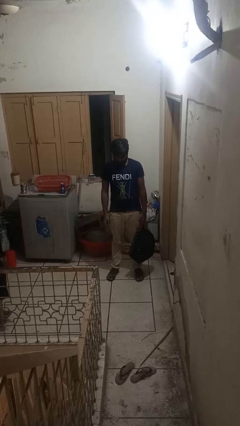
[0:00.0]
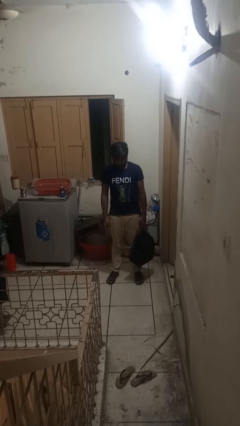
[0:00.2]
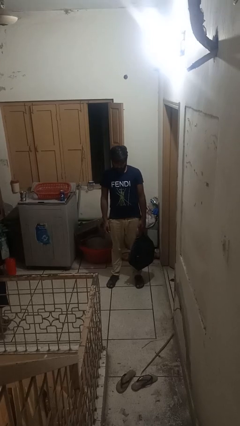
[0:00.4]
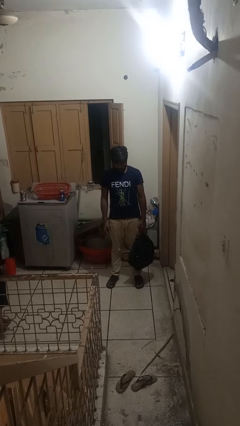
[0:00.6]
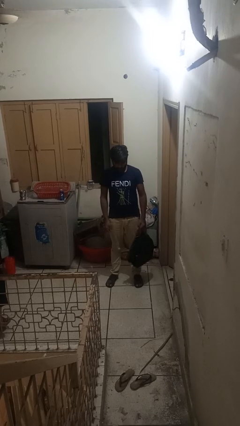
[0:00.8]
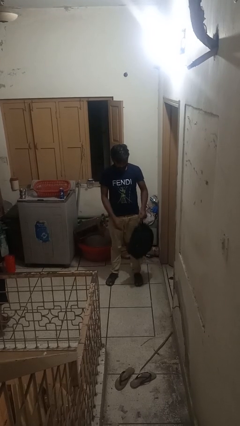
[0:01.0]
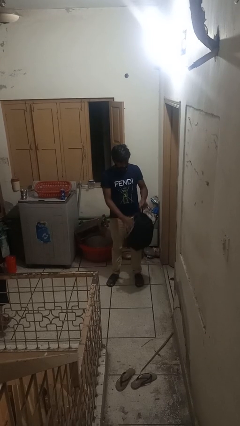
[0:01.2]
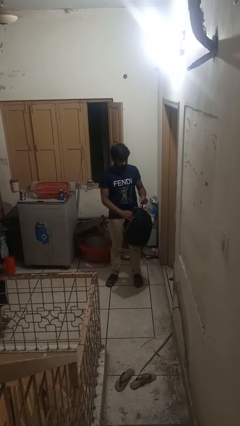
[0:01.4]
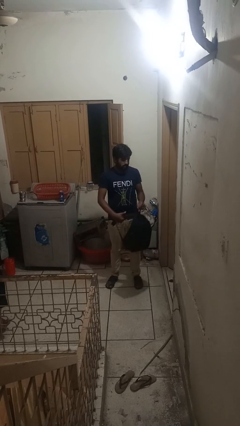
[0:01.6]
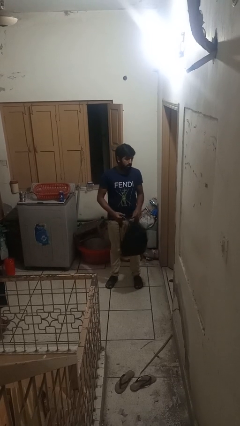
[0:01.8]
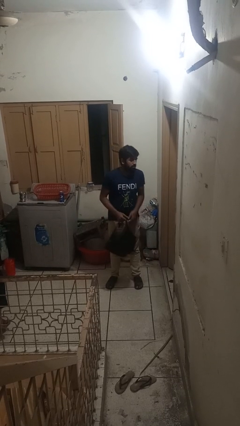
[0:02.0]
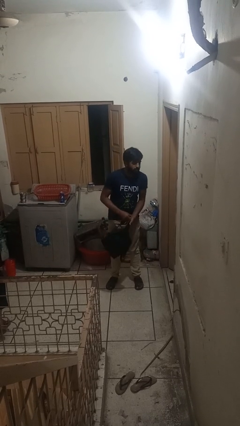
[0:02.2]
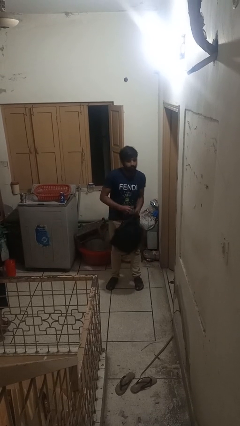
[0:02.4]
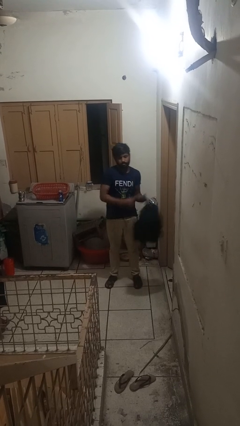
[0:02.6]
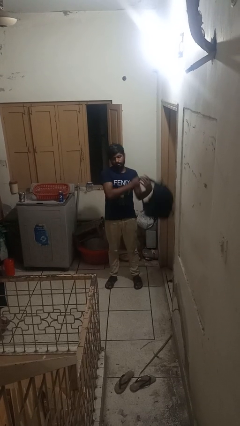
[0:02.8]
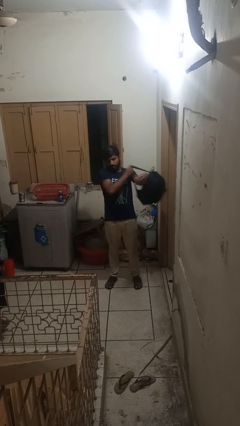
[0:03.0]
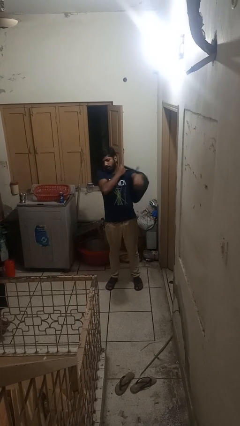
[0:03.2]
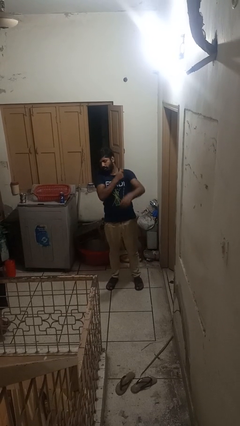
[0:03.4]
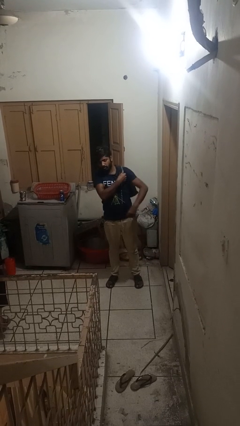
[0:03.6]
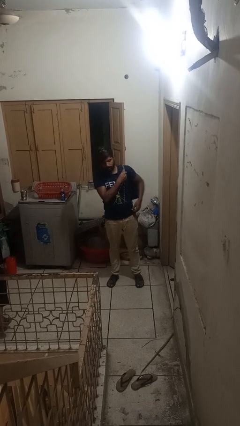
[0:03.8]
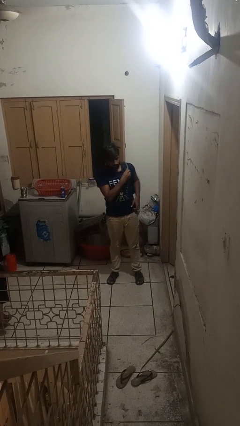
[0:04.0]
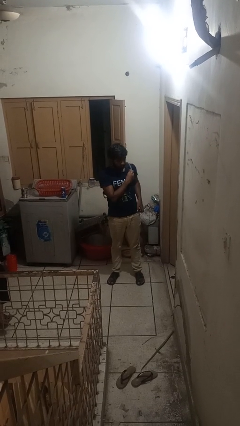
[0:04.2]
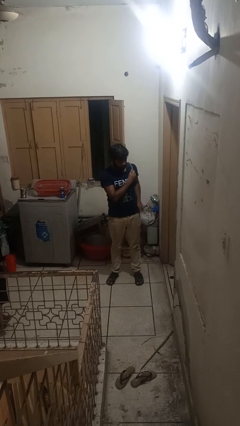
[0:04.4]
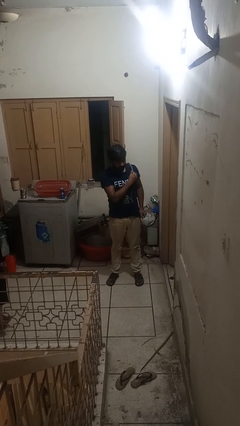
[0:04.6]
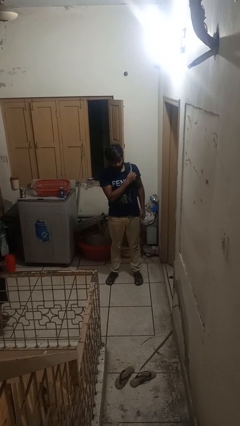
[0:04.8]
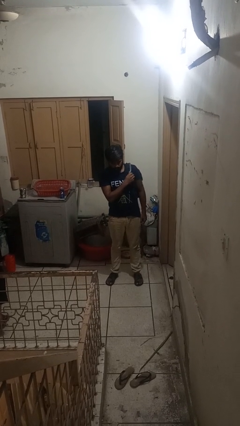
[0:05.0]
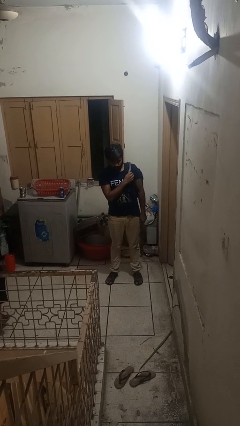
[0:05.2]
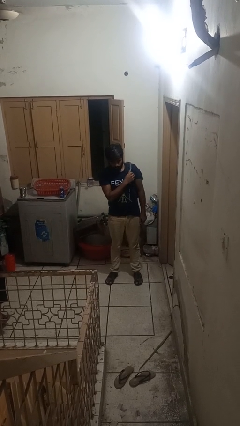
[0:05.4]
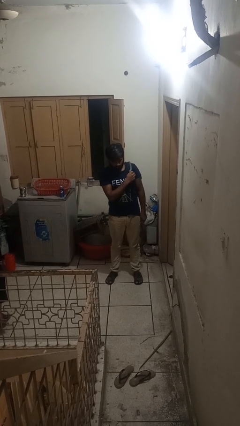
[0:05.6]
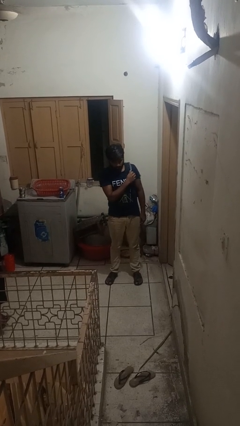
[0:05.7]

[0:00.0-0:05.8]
person puts on backpack

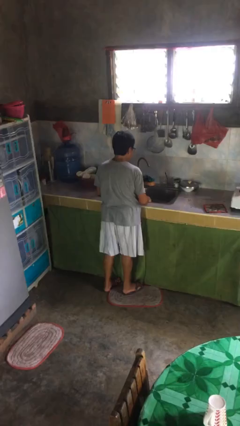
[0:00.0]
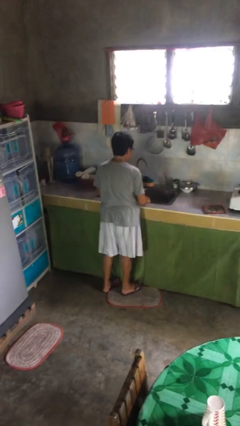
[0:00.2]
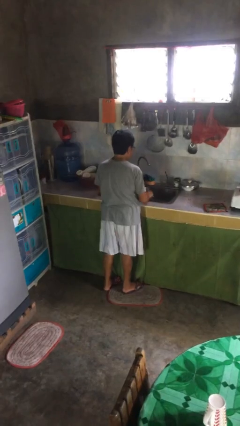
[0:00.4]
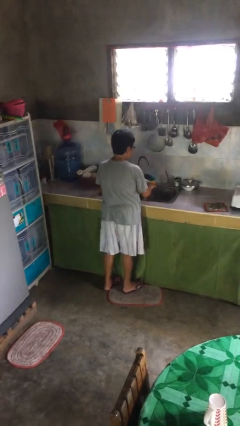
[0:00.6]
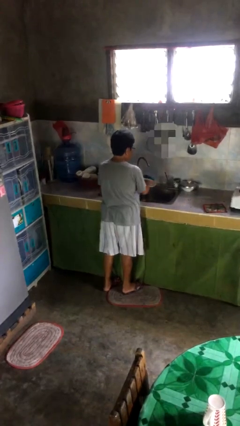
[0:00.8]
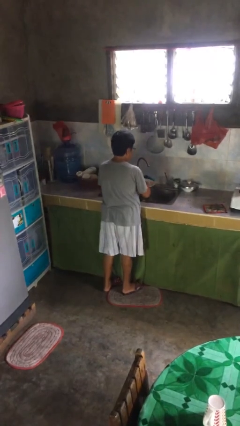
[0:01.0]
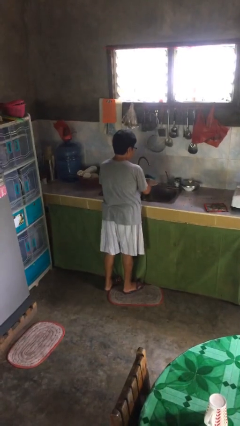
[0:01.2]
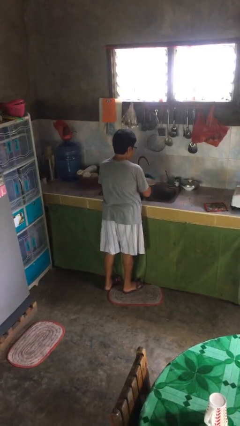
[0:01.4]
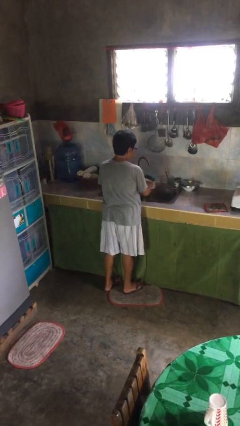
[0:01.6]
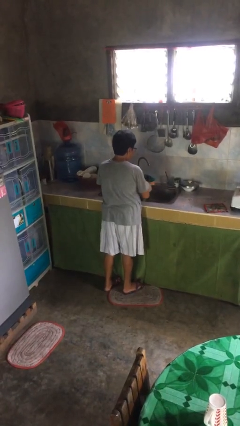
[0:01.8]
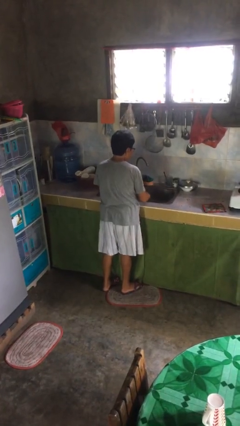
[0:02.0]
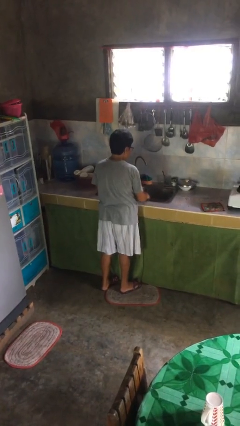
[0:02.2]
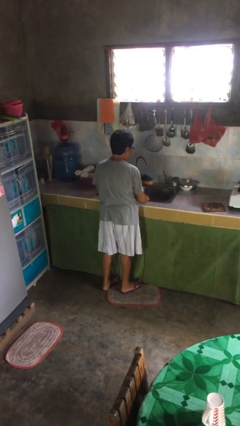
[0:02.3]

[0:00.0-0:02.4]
person washes dish

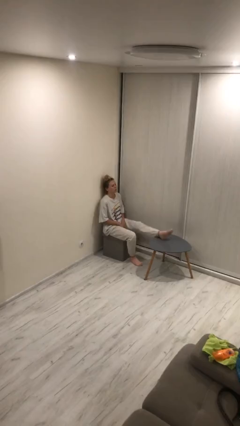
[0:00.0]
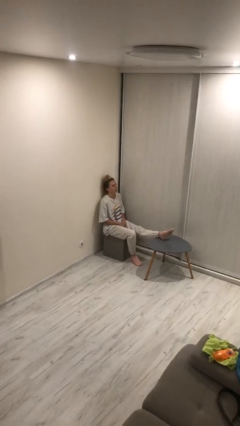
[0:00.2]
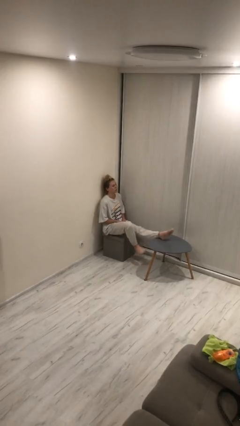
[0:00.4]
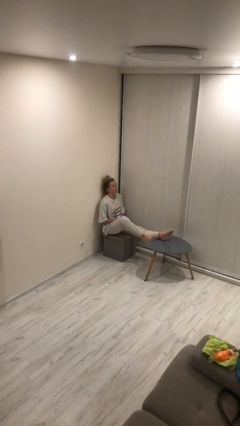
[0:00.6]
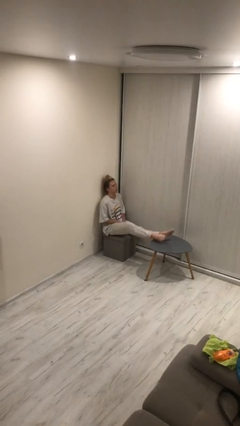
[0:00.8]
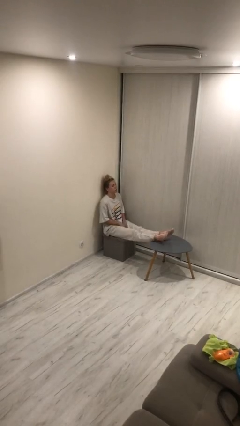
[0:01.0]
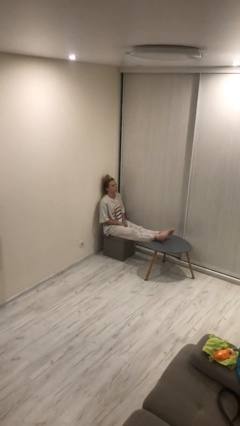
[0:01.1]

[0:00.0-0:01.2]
person puts feet up

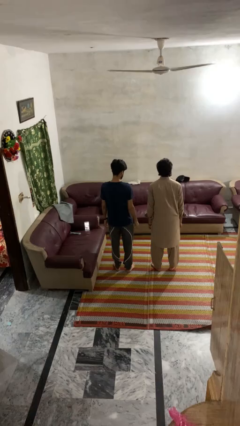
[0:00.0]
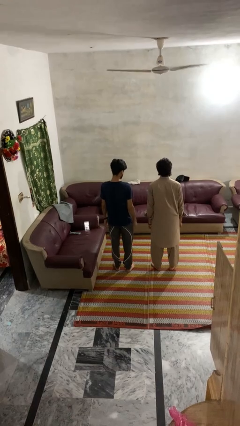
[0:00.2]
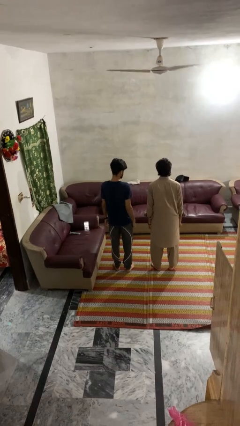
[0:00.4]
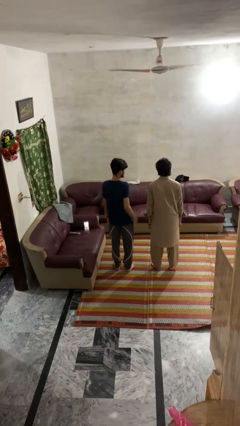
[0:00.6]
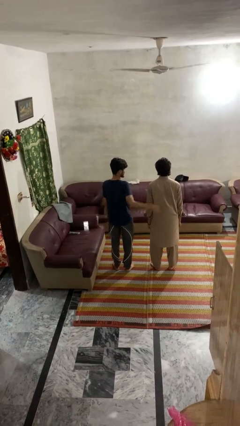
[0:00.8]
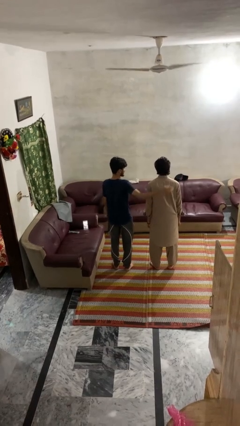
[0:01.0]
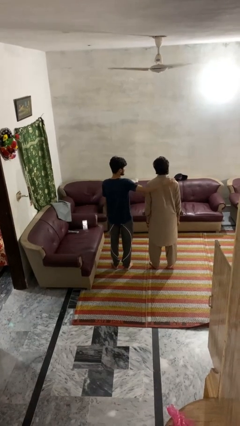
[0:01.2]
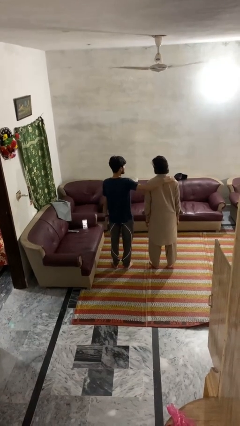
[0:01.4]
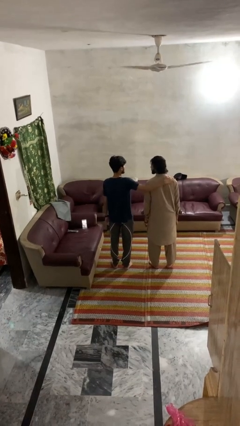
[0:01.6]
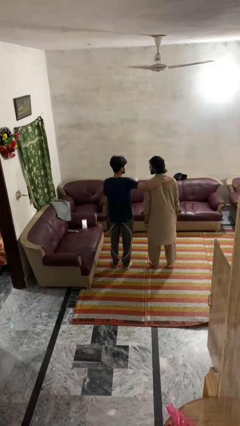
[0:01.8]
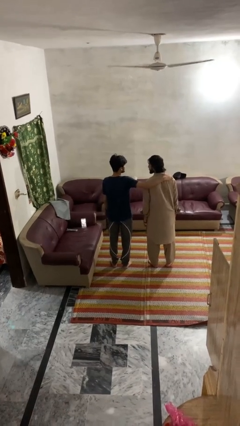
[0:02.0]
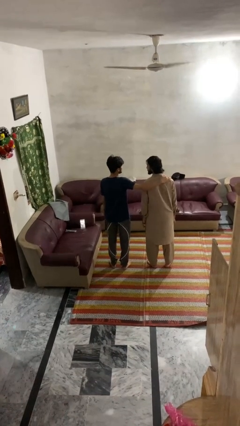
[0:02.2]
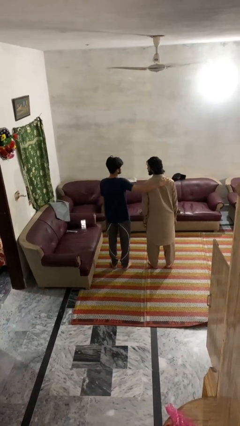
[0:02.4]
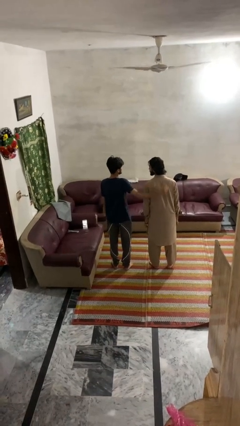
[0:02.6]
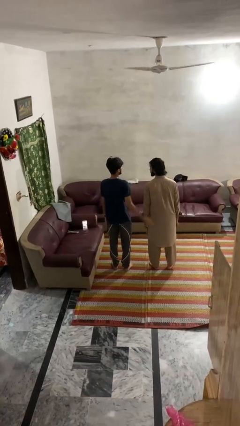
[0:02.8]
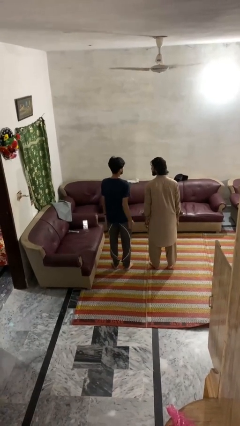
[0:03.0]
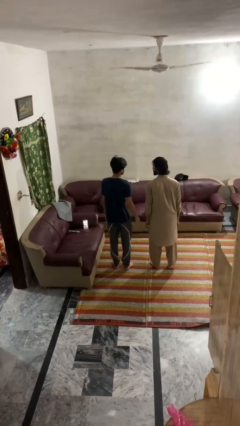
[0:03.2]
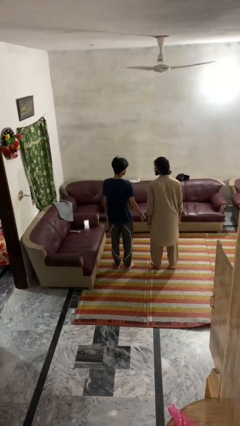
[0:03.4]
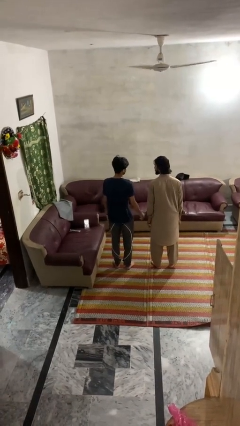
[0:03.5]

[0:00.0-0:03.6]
person pounds shoulders of person

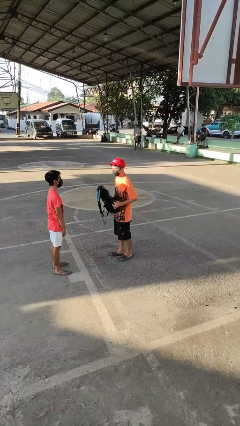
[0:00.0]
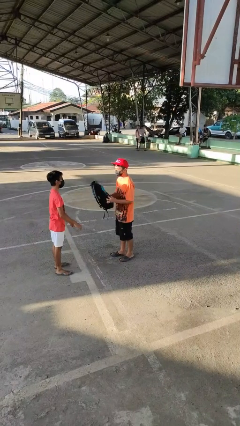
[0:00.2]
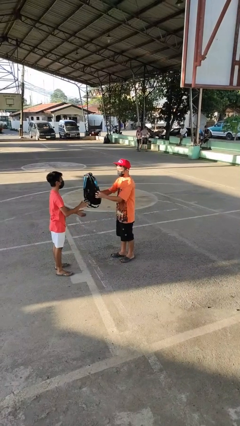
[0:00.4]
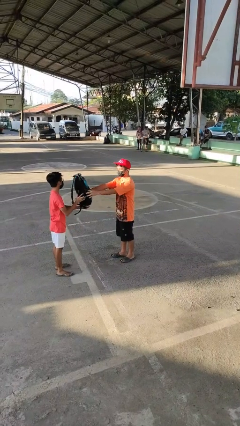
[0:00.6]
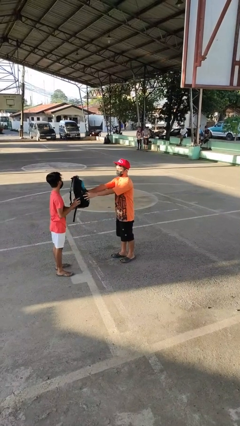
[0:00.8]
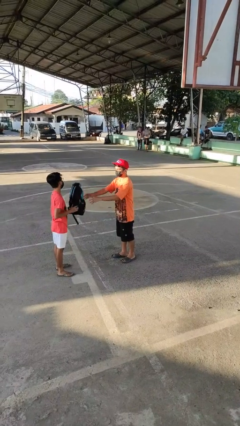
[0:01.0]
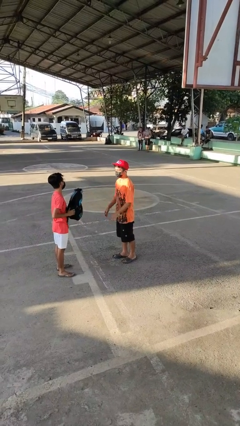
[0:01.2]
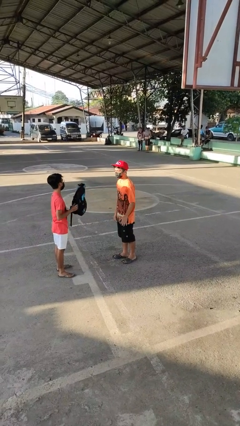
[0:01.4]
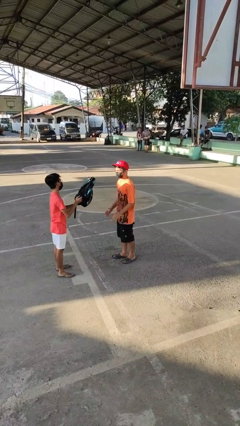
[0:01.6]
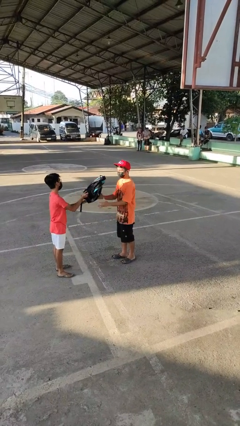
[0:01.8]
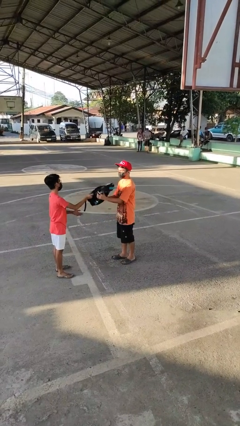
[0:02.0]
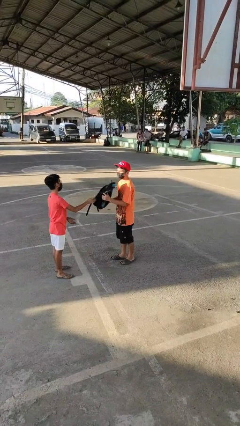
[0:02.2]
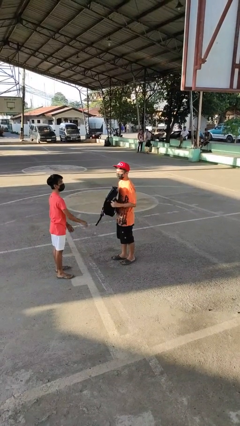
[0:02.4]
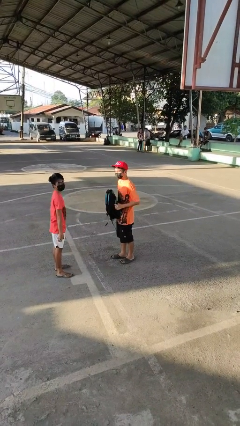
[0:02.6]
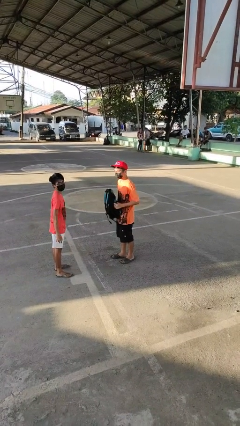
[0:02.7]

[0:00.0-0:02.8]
person transfers object to person

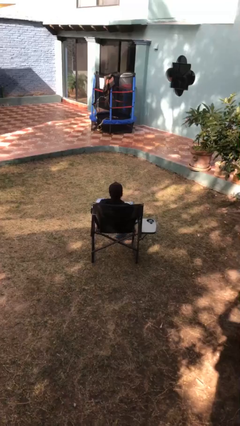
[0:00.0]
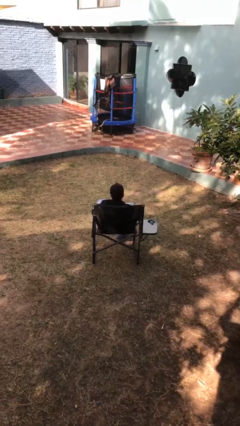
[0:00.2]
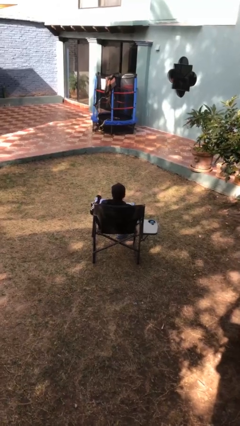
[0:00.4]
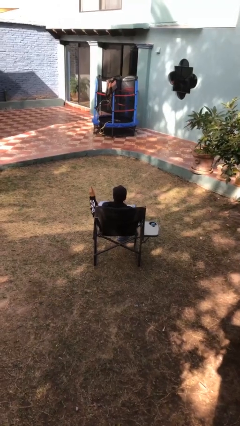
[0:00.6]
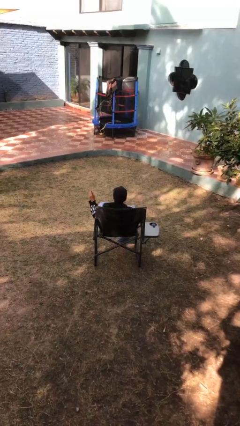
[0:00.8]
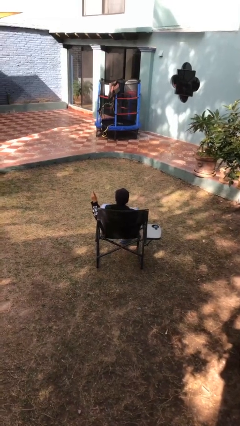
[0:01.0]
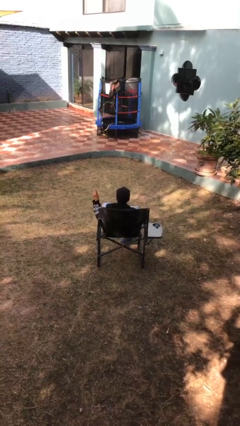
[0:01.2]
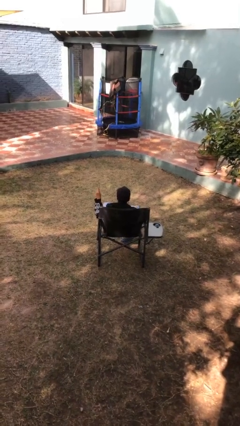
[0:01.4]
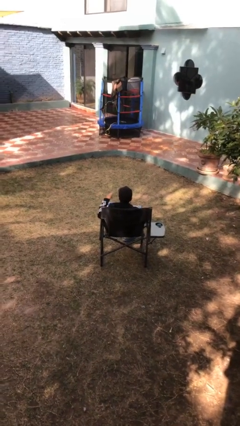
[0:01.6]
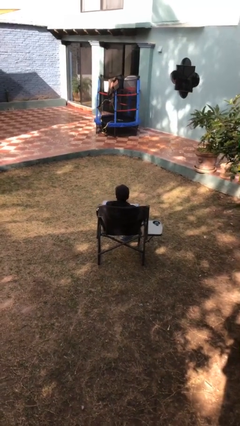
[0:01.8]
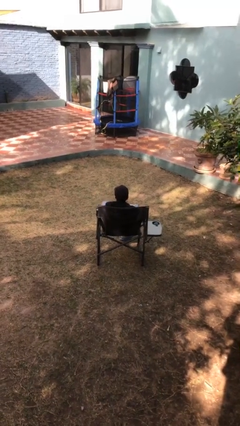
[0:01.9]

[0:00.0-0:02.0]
person gestures number one
